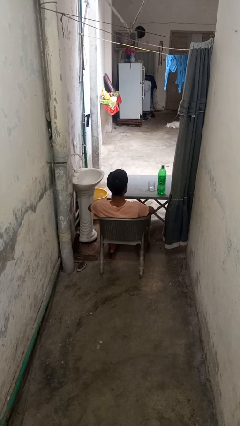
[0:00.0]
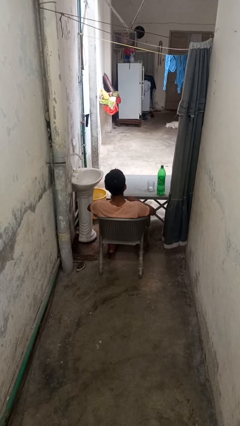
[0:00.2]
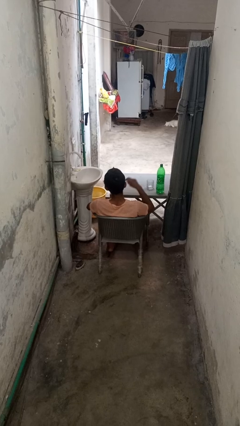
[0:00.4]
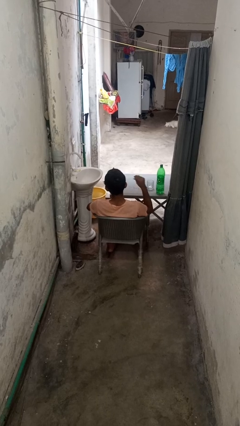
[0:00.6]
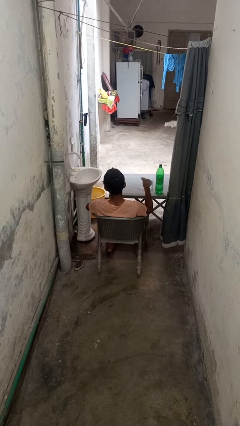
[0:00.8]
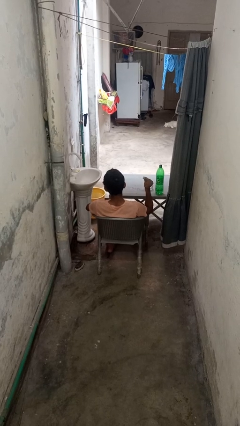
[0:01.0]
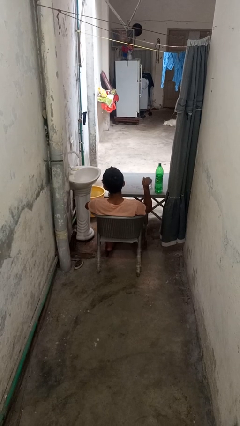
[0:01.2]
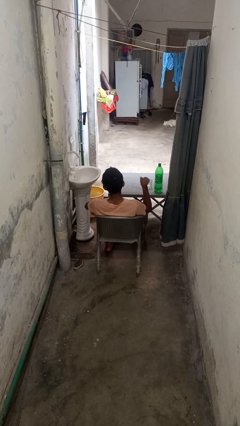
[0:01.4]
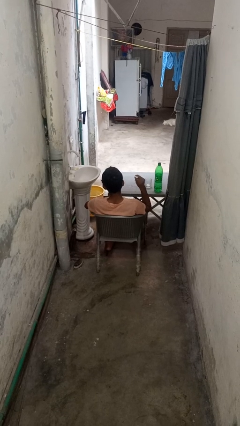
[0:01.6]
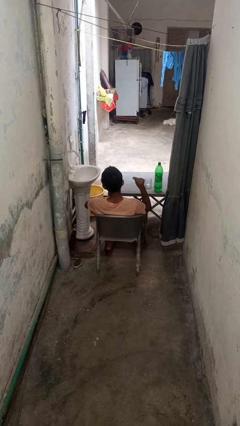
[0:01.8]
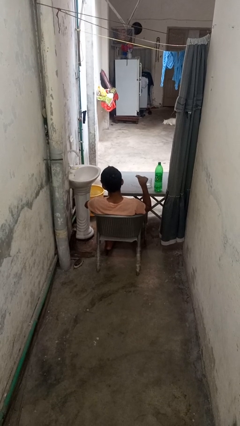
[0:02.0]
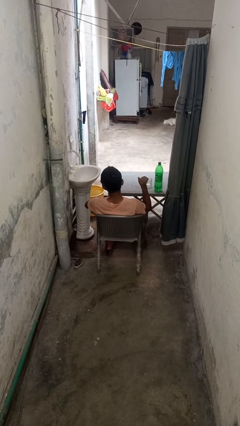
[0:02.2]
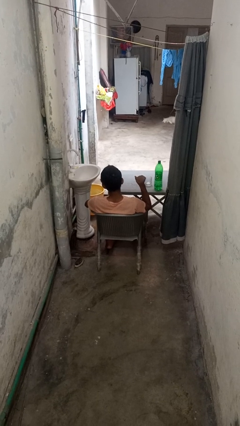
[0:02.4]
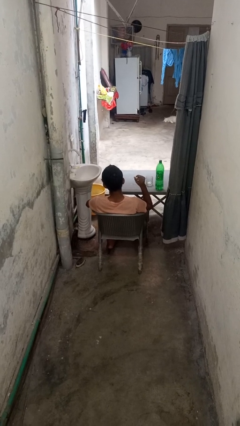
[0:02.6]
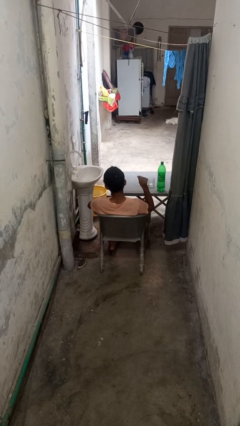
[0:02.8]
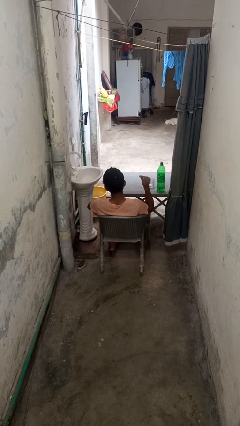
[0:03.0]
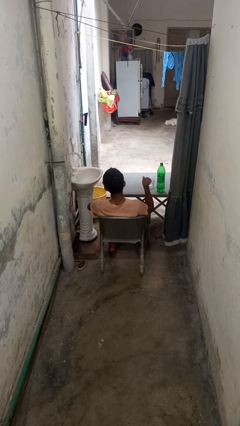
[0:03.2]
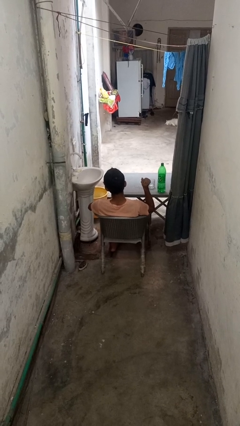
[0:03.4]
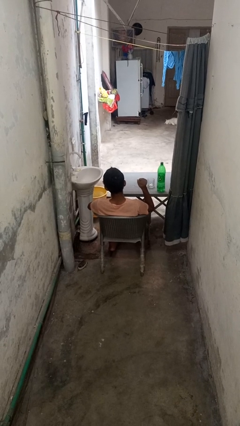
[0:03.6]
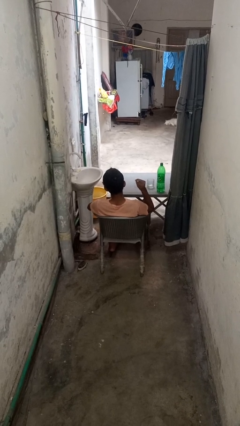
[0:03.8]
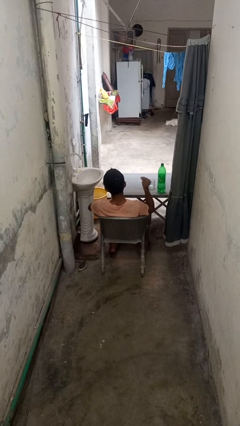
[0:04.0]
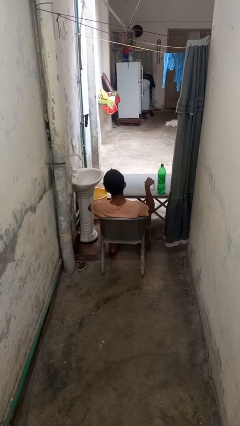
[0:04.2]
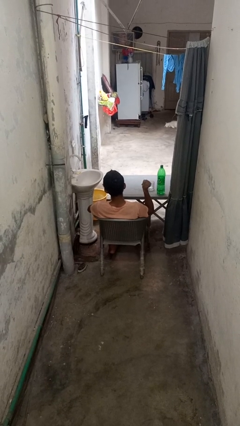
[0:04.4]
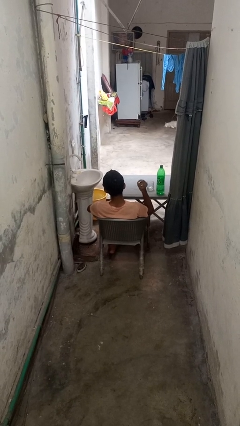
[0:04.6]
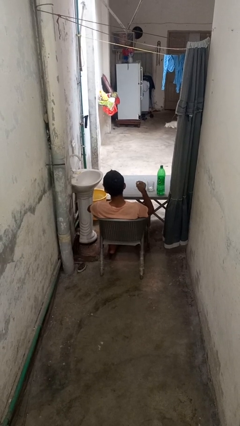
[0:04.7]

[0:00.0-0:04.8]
person snaps fingers

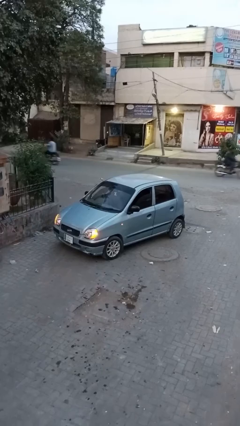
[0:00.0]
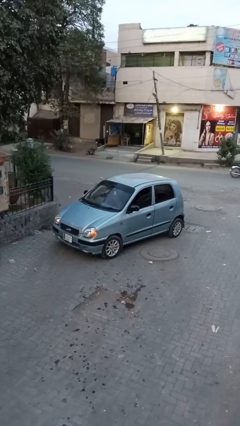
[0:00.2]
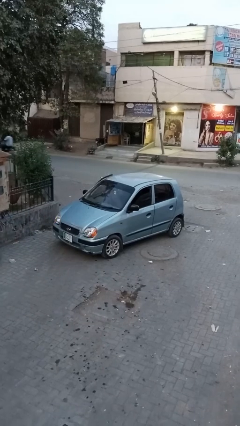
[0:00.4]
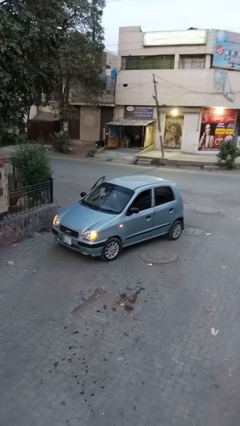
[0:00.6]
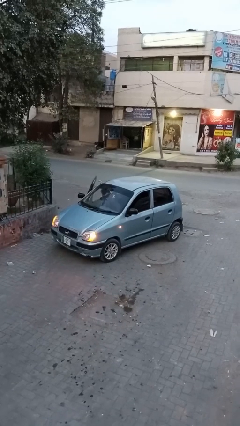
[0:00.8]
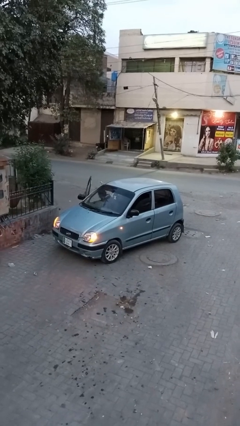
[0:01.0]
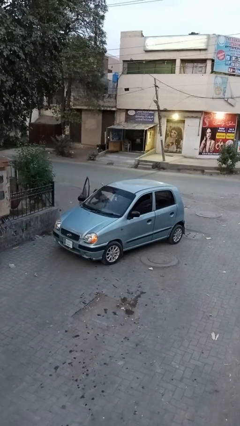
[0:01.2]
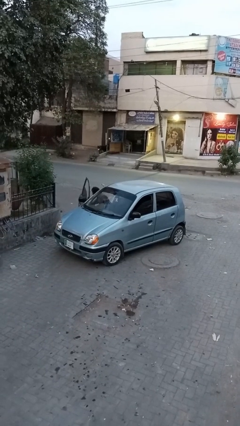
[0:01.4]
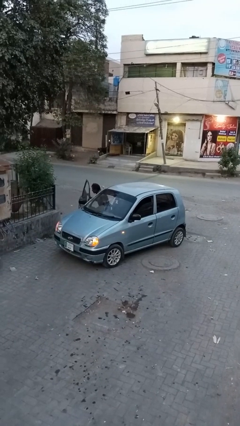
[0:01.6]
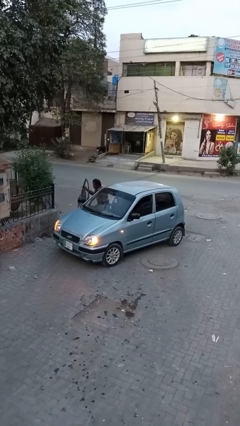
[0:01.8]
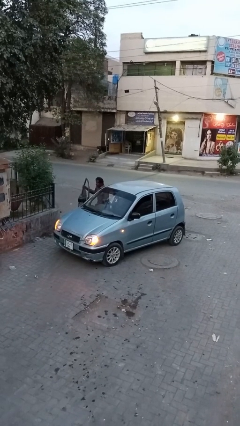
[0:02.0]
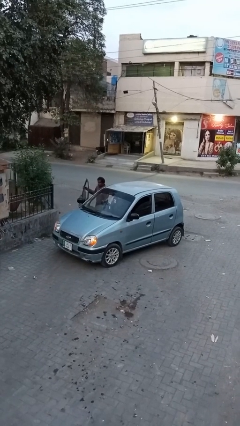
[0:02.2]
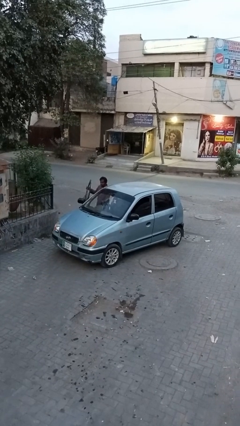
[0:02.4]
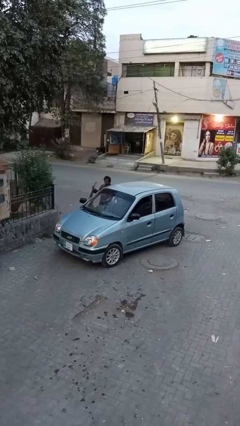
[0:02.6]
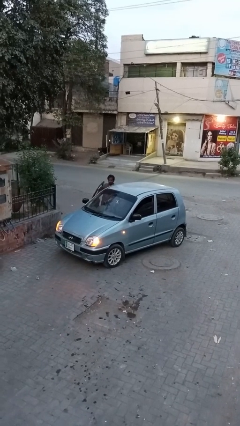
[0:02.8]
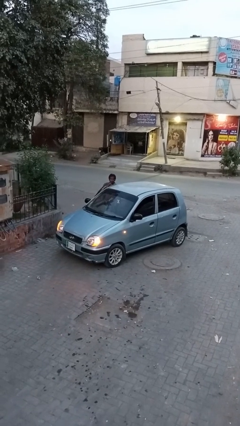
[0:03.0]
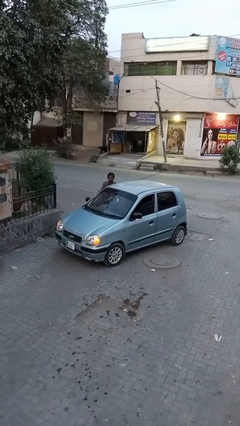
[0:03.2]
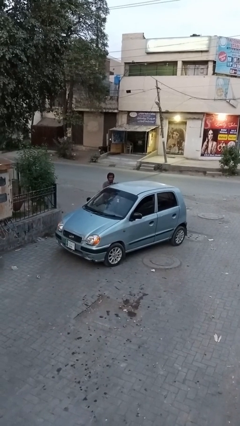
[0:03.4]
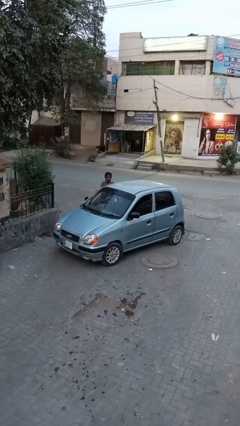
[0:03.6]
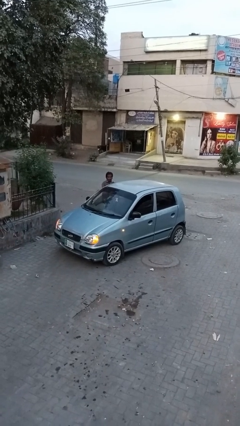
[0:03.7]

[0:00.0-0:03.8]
car drops off person

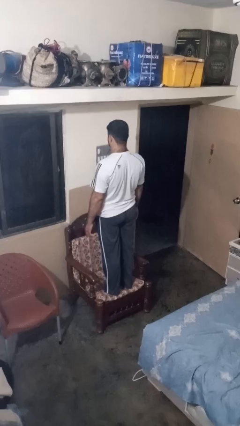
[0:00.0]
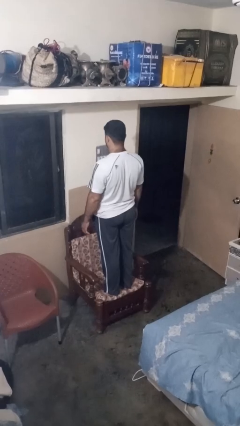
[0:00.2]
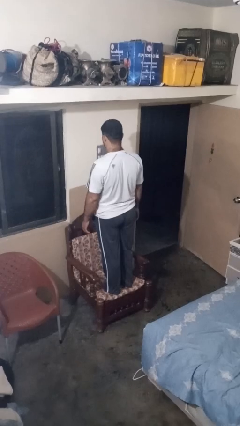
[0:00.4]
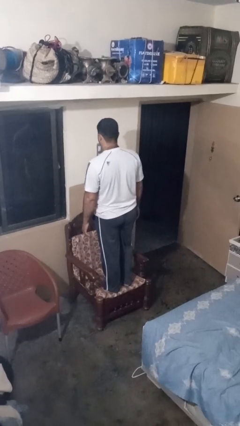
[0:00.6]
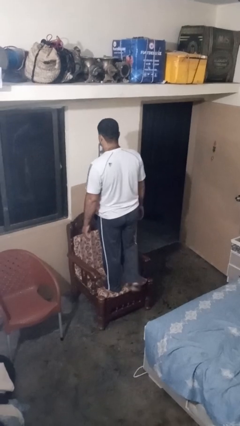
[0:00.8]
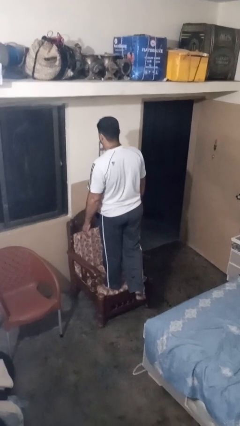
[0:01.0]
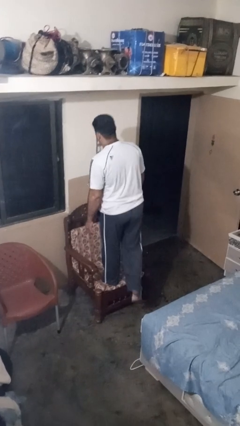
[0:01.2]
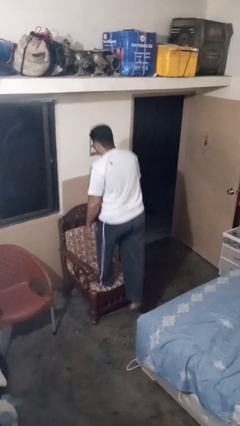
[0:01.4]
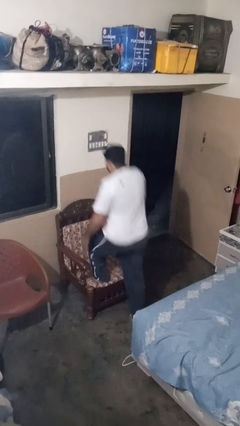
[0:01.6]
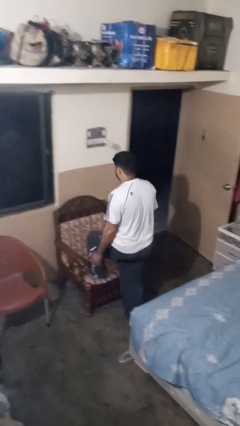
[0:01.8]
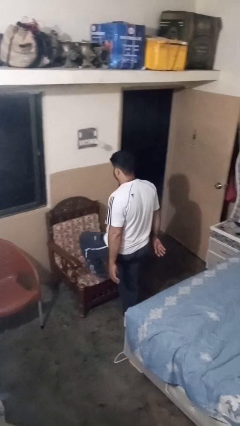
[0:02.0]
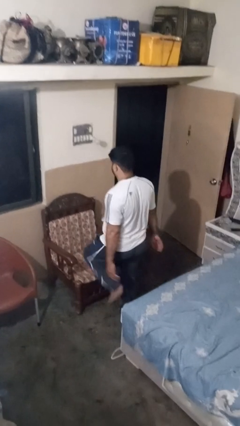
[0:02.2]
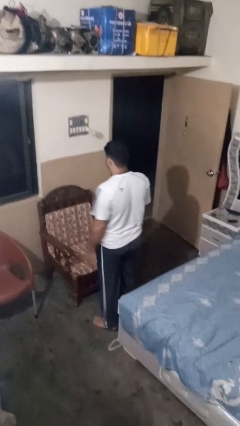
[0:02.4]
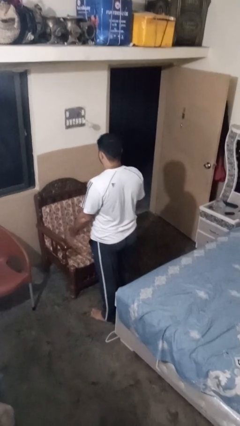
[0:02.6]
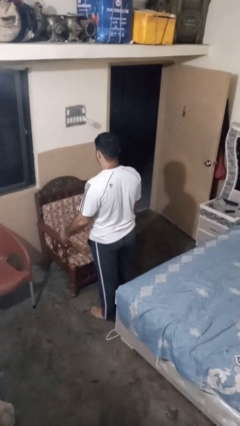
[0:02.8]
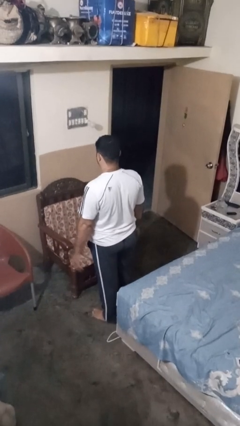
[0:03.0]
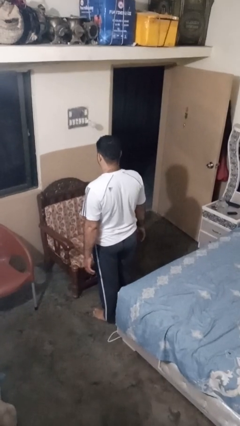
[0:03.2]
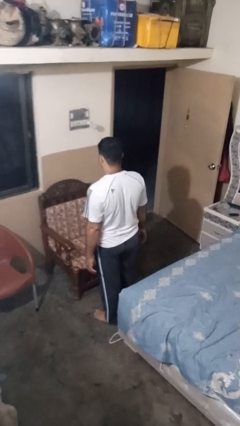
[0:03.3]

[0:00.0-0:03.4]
person climbs off couch

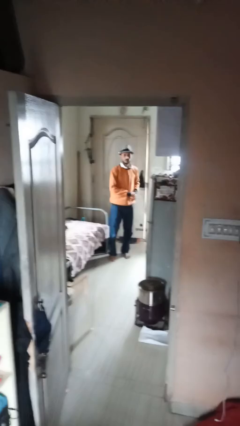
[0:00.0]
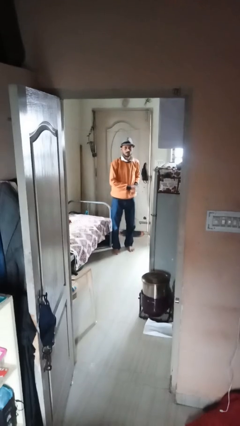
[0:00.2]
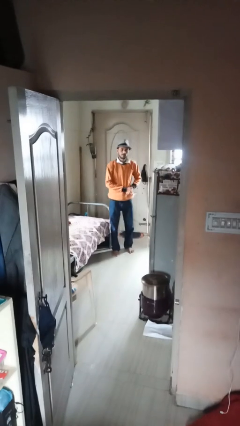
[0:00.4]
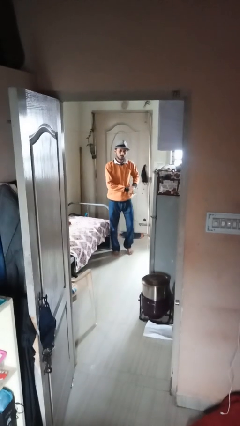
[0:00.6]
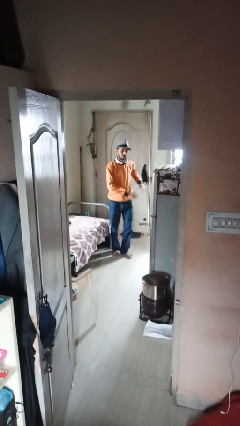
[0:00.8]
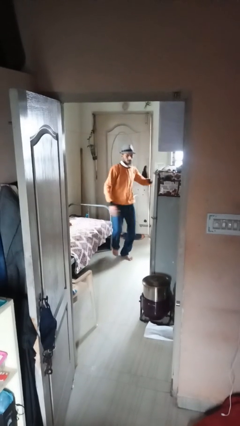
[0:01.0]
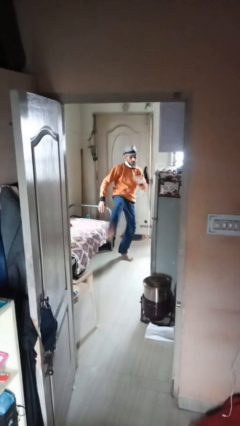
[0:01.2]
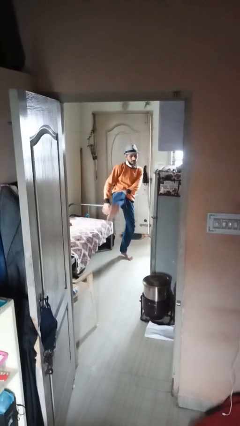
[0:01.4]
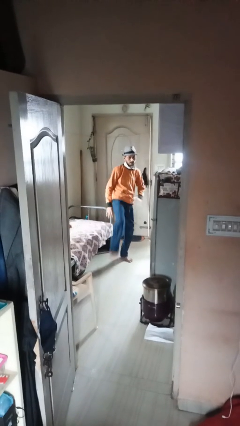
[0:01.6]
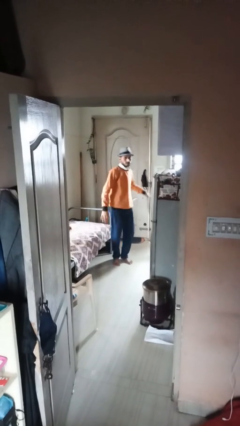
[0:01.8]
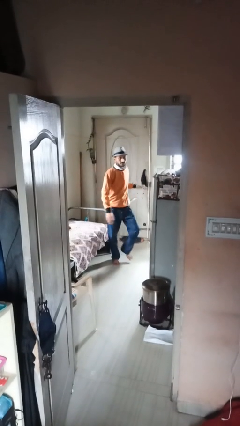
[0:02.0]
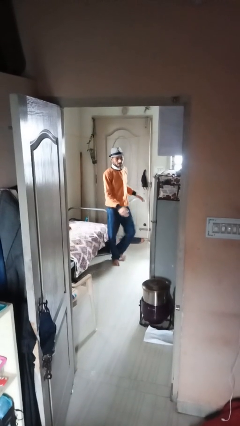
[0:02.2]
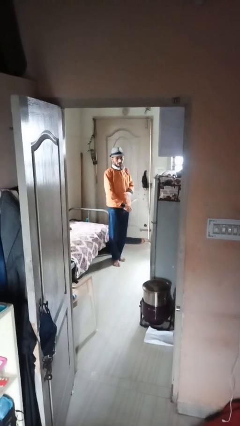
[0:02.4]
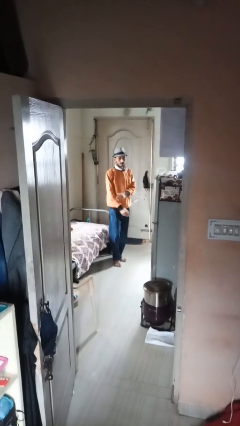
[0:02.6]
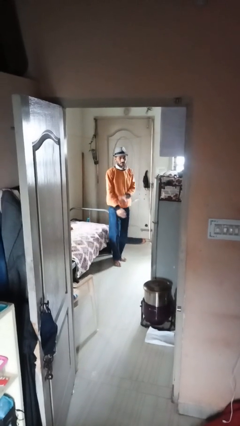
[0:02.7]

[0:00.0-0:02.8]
person karate kicks

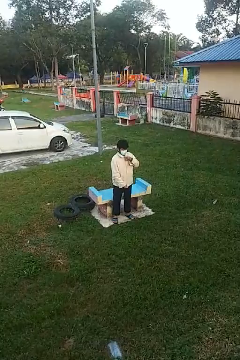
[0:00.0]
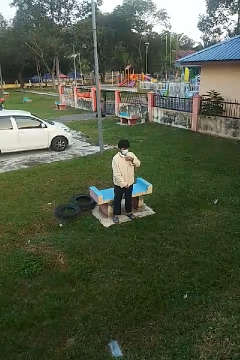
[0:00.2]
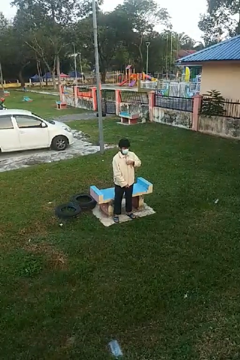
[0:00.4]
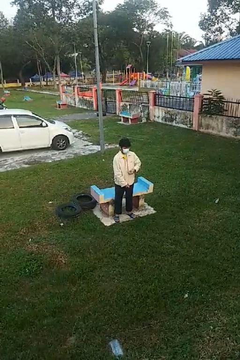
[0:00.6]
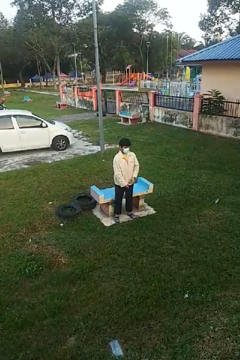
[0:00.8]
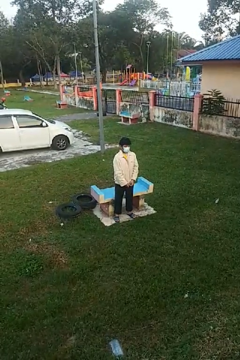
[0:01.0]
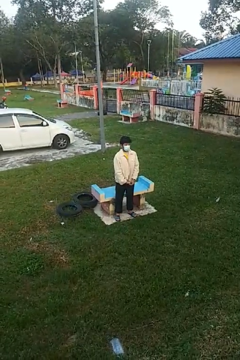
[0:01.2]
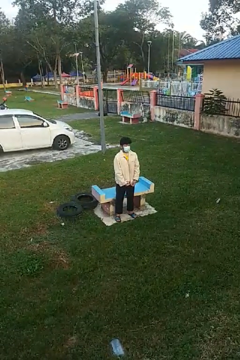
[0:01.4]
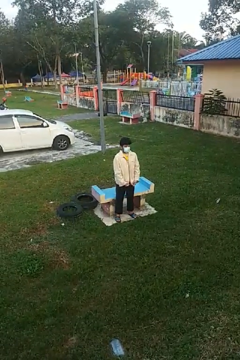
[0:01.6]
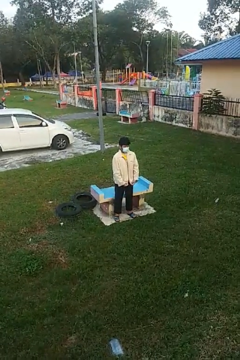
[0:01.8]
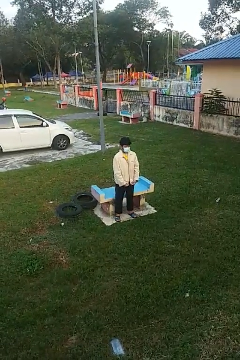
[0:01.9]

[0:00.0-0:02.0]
person unzips jacket

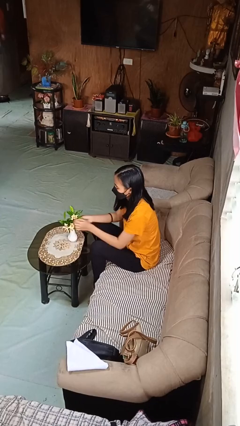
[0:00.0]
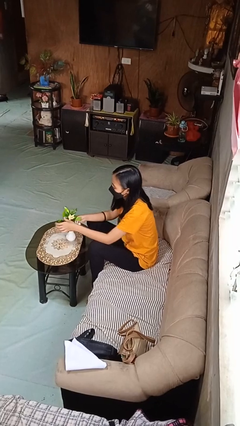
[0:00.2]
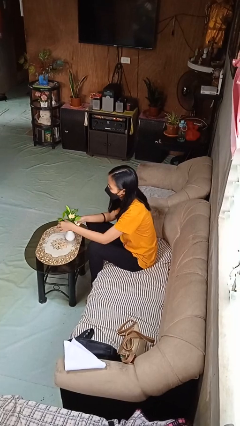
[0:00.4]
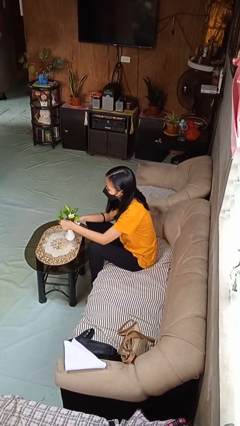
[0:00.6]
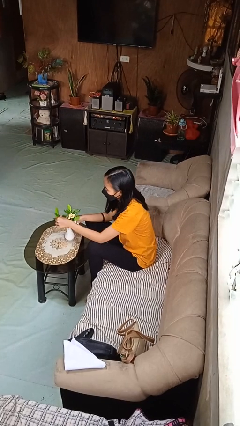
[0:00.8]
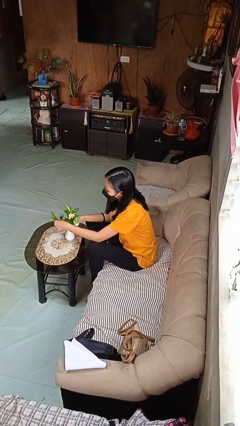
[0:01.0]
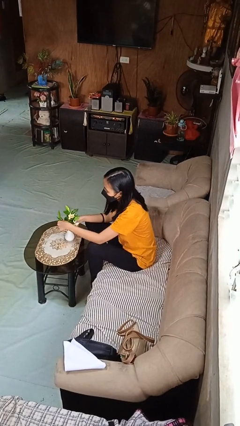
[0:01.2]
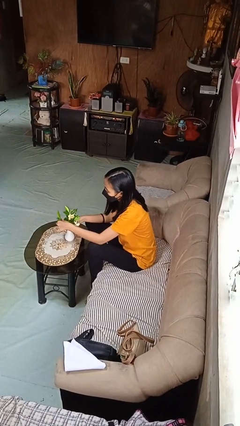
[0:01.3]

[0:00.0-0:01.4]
person arranges flowers in vase
